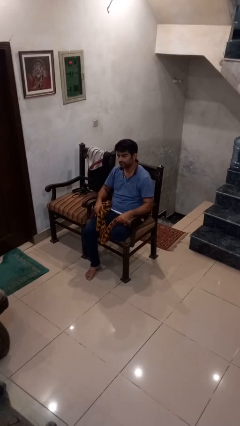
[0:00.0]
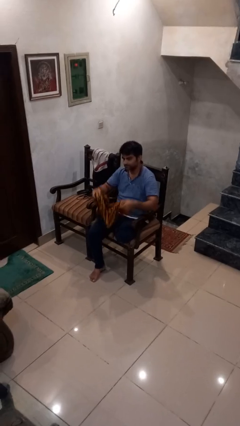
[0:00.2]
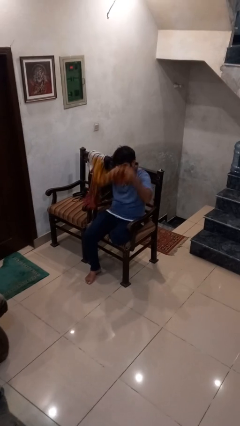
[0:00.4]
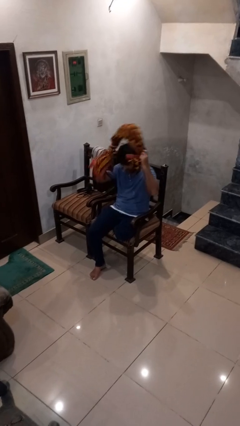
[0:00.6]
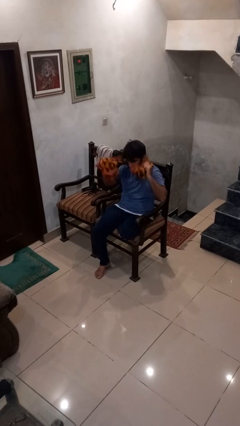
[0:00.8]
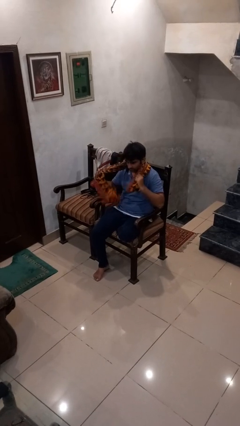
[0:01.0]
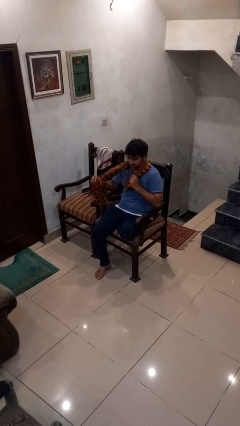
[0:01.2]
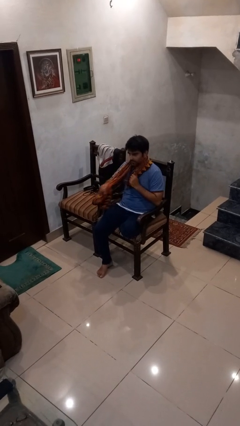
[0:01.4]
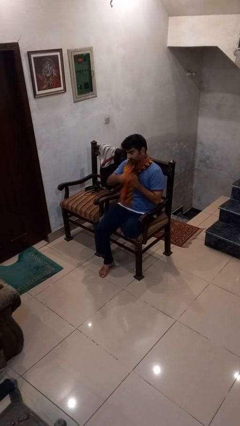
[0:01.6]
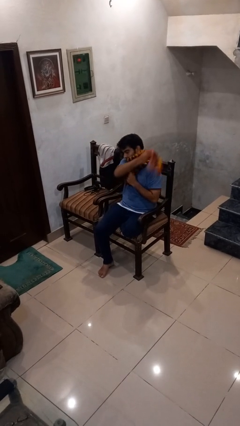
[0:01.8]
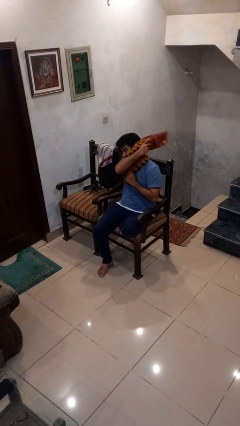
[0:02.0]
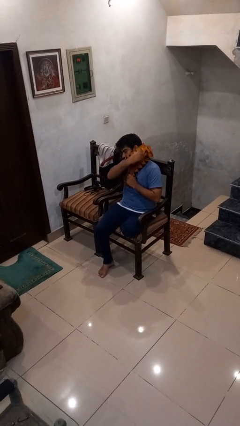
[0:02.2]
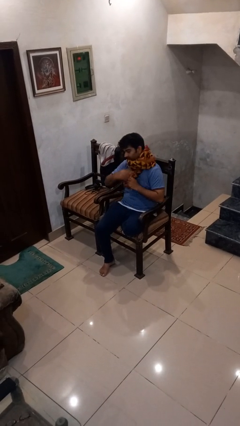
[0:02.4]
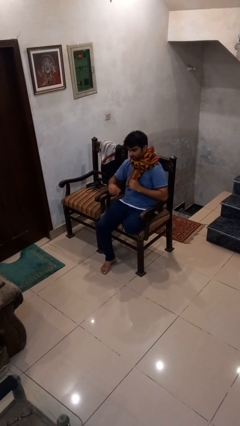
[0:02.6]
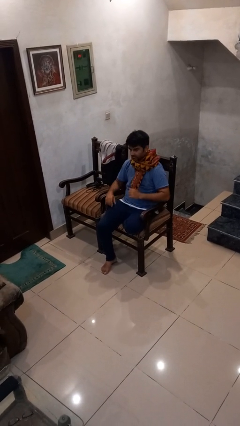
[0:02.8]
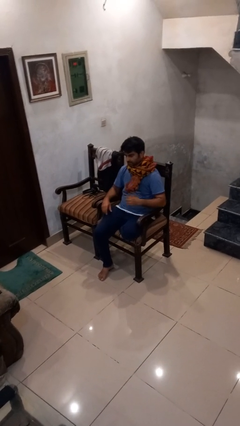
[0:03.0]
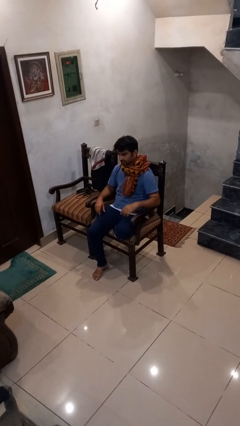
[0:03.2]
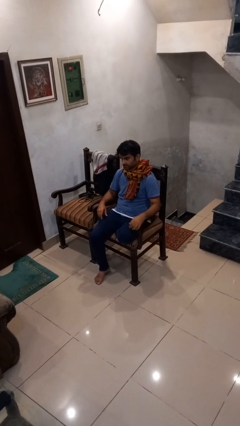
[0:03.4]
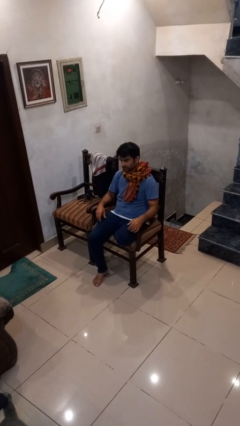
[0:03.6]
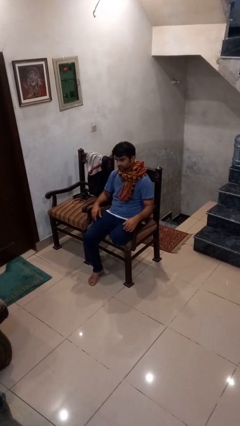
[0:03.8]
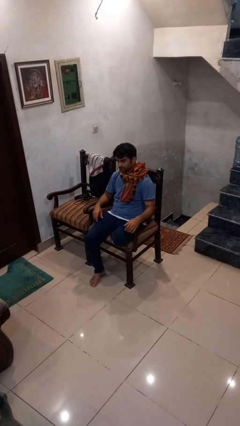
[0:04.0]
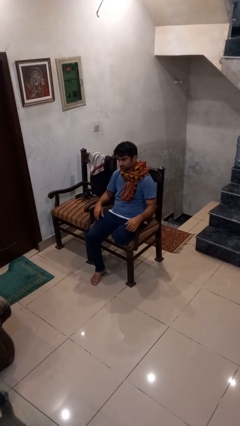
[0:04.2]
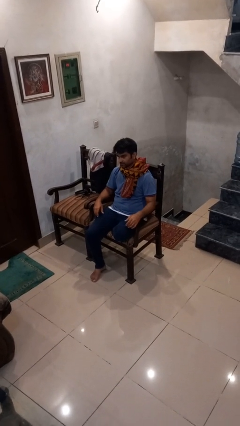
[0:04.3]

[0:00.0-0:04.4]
person puts on scarf

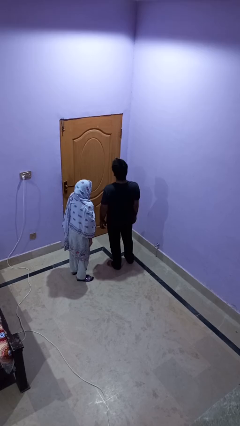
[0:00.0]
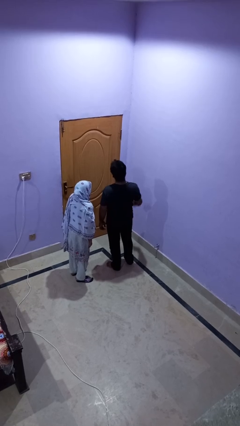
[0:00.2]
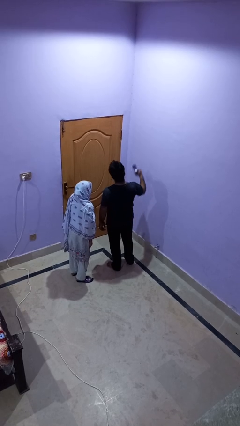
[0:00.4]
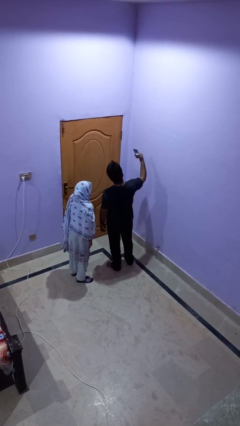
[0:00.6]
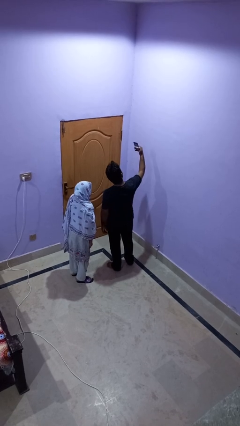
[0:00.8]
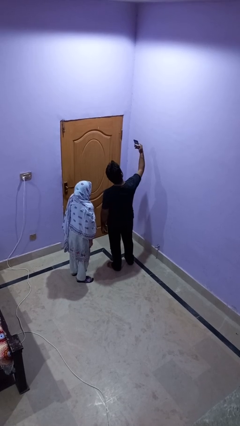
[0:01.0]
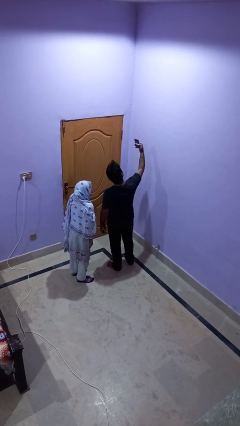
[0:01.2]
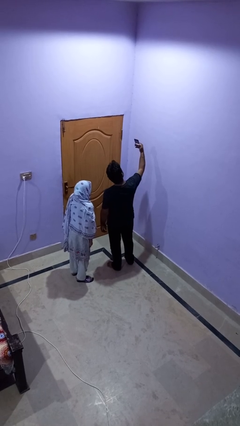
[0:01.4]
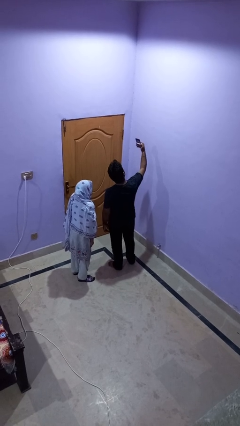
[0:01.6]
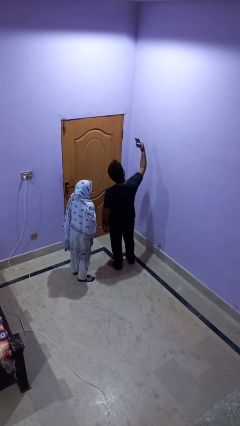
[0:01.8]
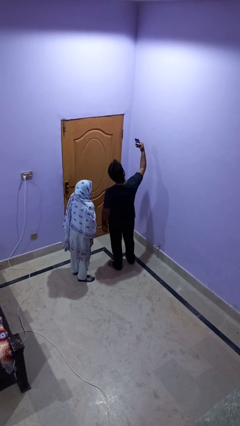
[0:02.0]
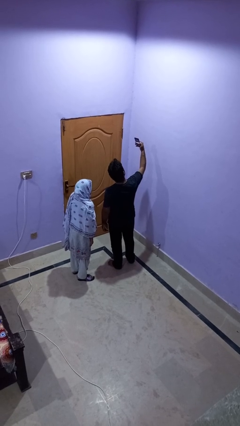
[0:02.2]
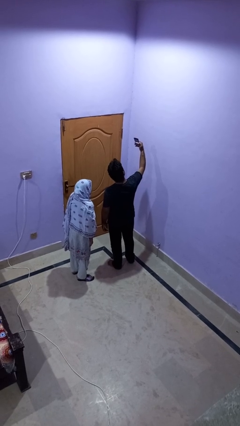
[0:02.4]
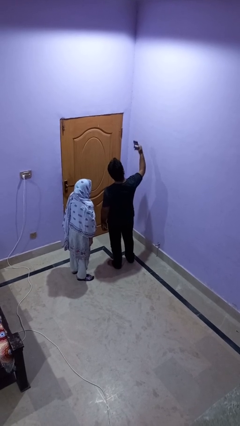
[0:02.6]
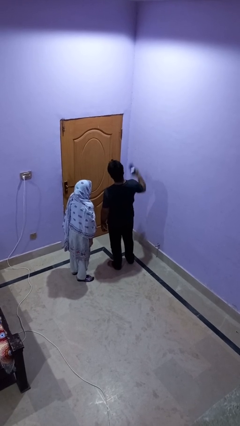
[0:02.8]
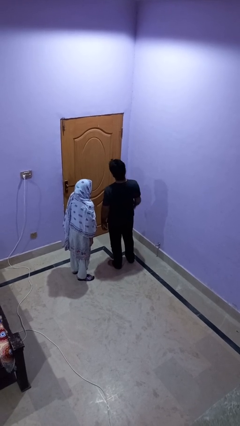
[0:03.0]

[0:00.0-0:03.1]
person takes selfie with person

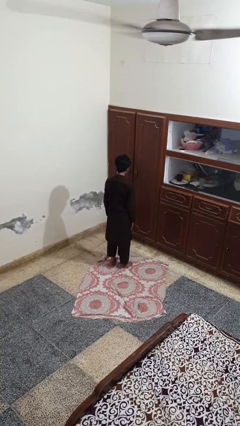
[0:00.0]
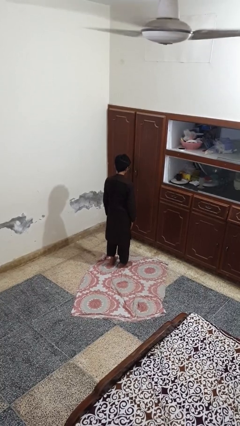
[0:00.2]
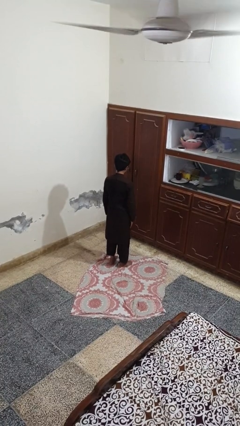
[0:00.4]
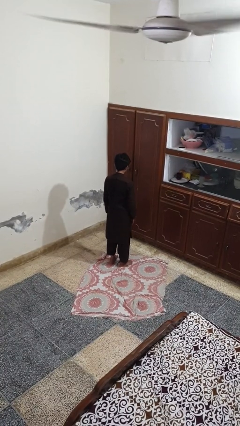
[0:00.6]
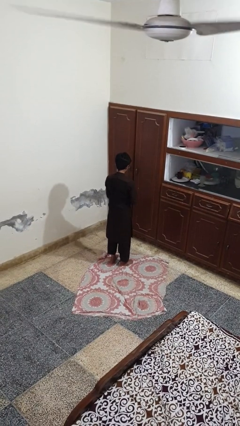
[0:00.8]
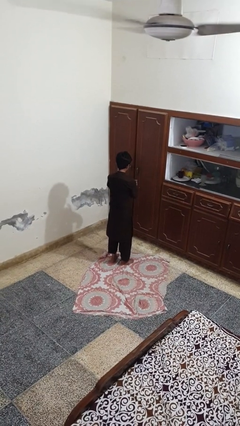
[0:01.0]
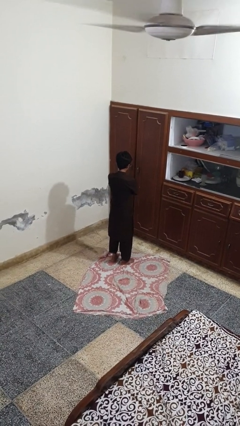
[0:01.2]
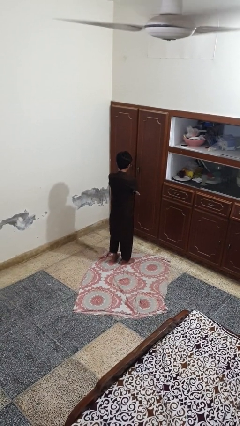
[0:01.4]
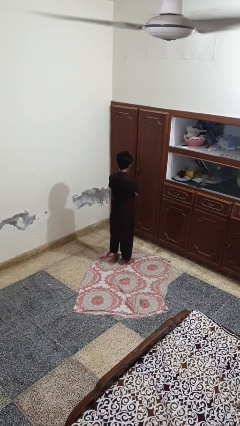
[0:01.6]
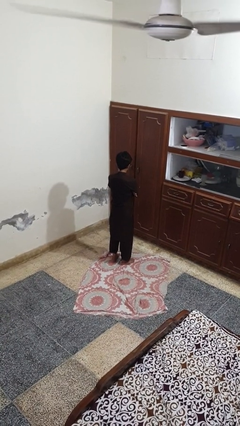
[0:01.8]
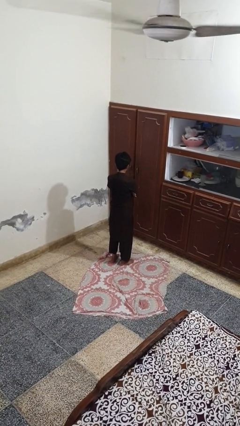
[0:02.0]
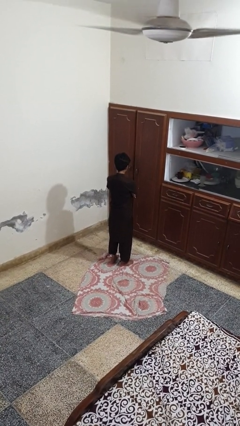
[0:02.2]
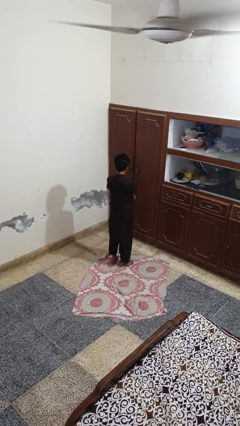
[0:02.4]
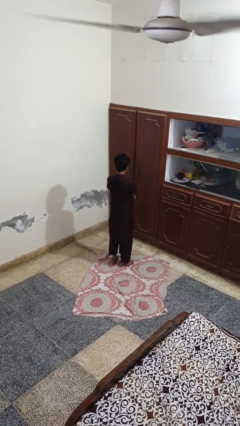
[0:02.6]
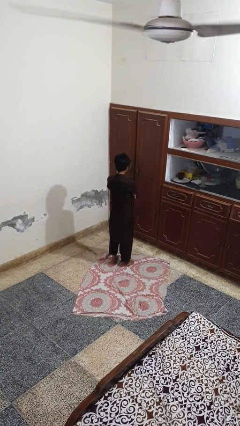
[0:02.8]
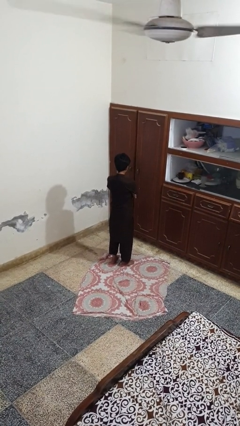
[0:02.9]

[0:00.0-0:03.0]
person crosses arms

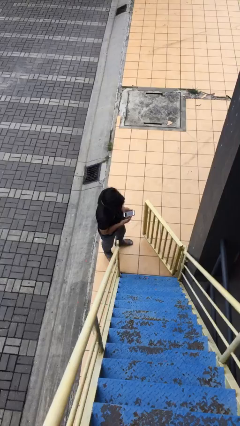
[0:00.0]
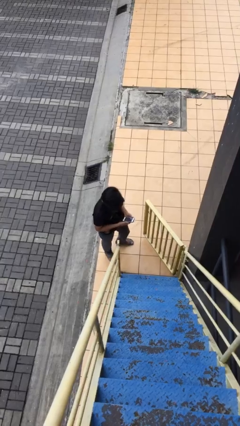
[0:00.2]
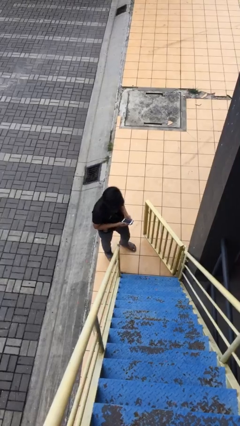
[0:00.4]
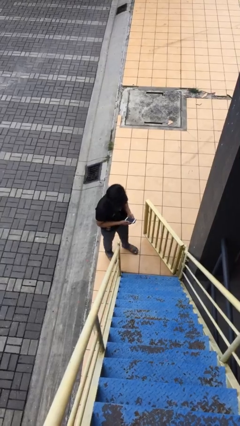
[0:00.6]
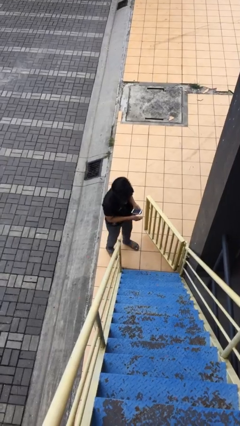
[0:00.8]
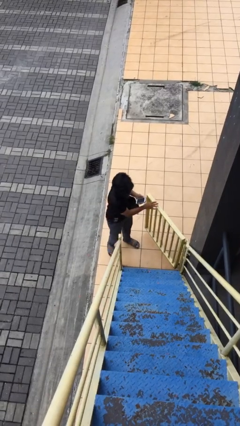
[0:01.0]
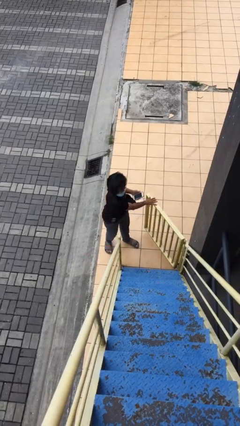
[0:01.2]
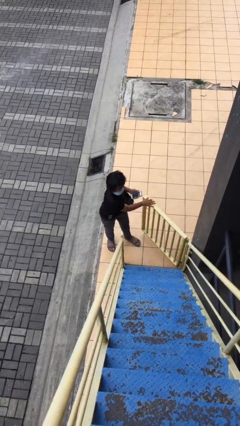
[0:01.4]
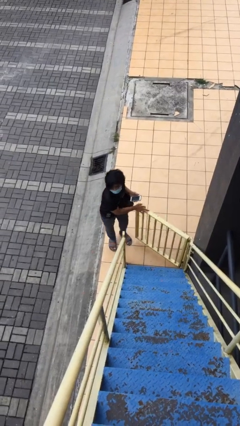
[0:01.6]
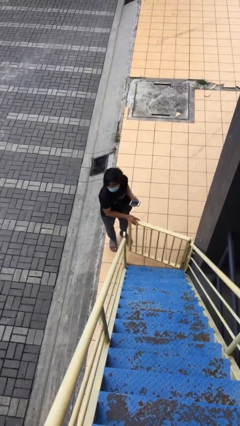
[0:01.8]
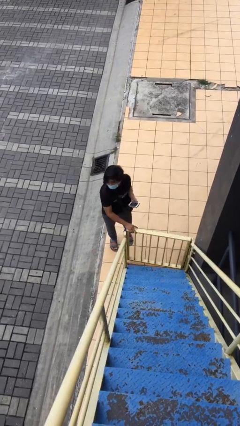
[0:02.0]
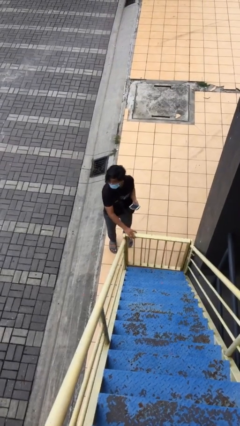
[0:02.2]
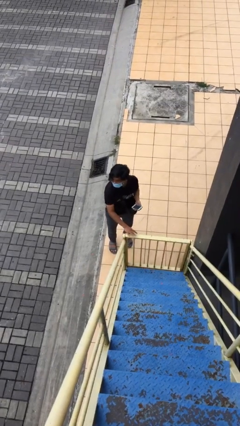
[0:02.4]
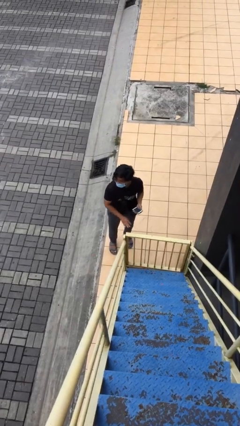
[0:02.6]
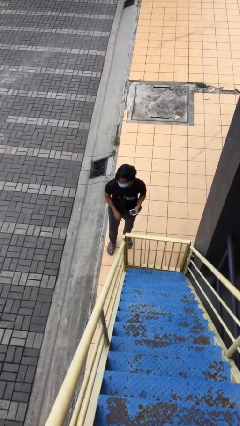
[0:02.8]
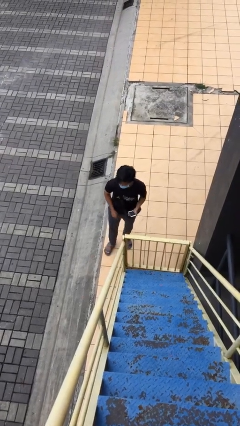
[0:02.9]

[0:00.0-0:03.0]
person closes facility door

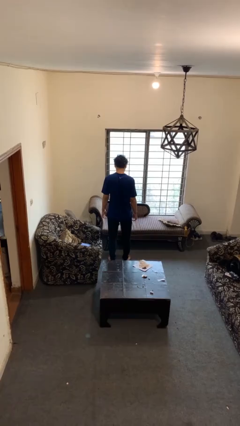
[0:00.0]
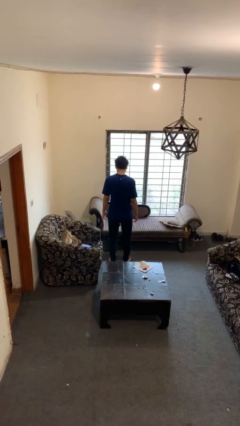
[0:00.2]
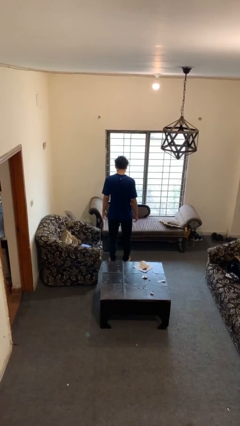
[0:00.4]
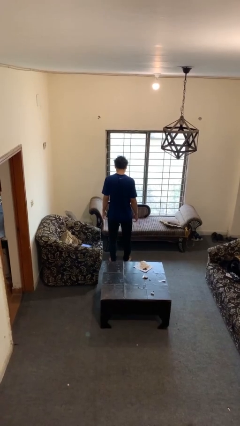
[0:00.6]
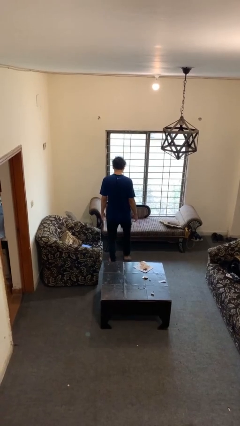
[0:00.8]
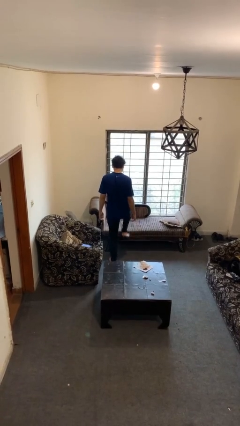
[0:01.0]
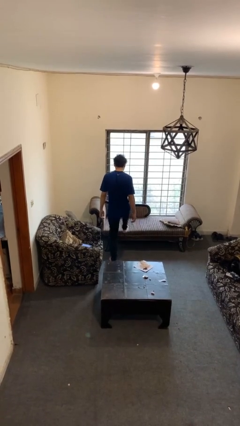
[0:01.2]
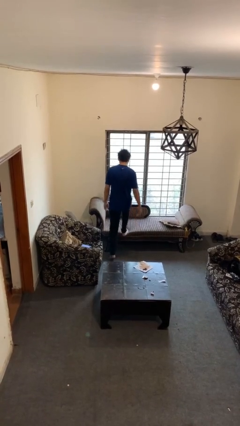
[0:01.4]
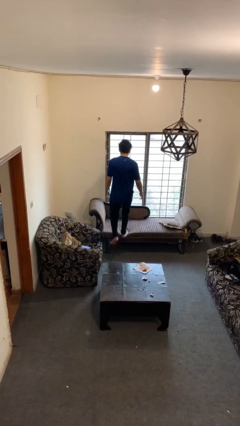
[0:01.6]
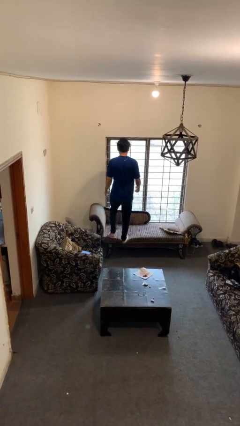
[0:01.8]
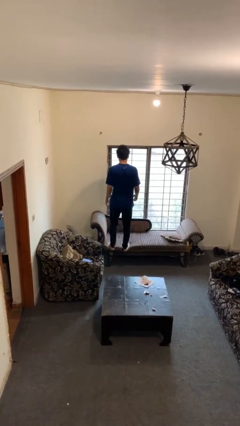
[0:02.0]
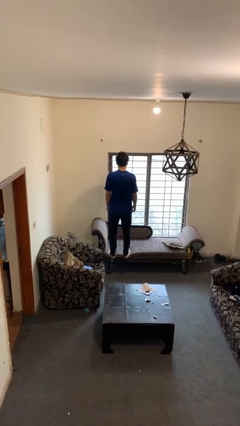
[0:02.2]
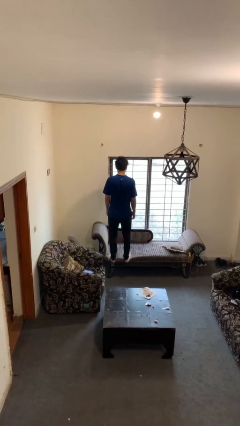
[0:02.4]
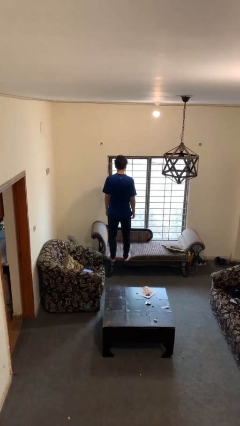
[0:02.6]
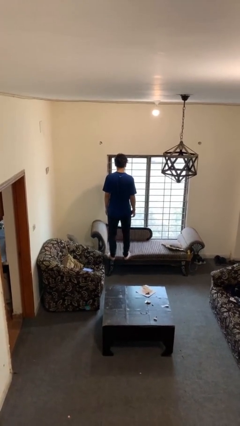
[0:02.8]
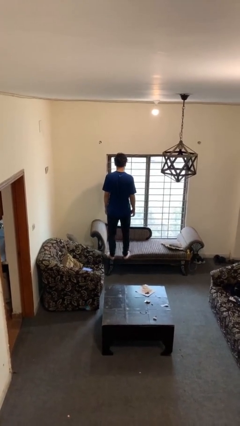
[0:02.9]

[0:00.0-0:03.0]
person climbs on couch

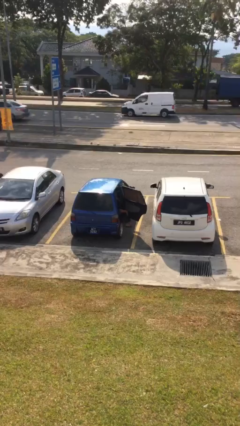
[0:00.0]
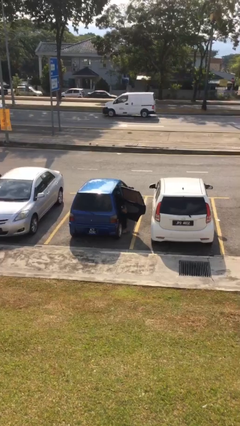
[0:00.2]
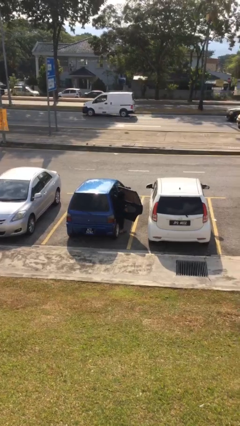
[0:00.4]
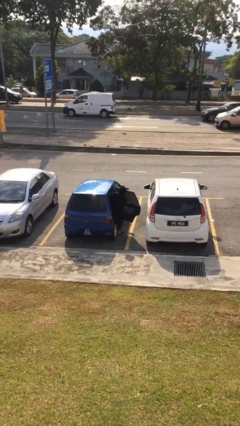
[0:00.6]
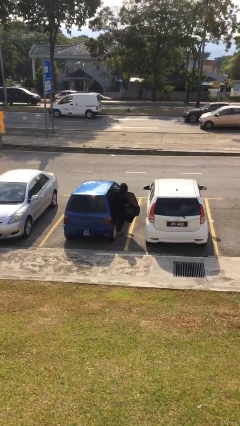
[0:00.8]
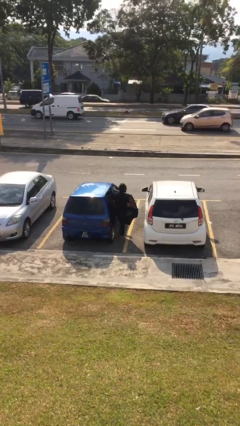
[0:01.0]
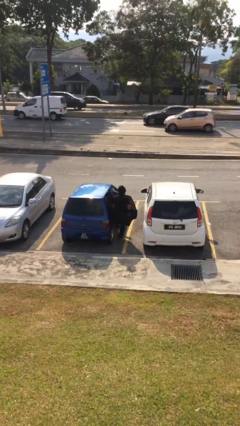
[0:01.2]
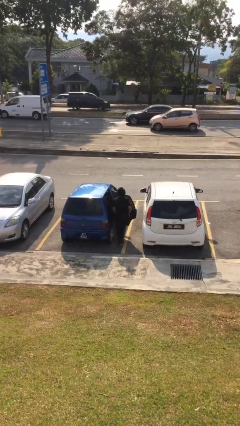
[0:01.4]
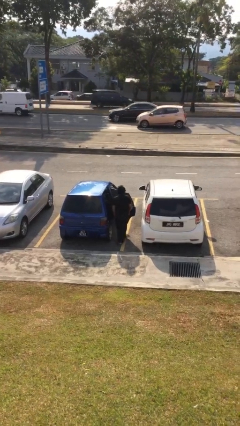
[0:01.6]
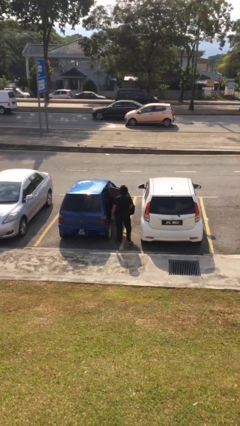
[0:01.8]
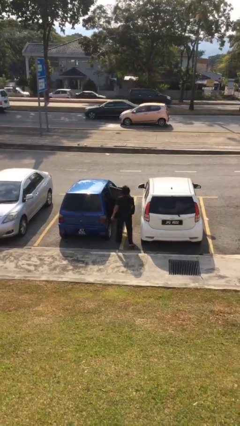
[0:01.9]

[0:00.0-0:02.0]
person exits car
